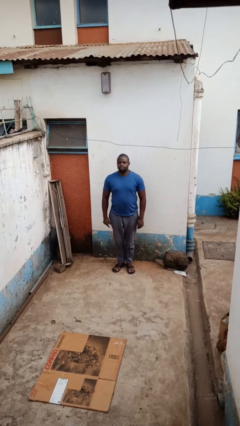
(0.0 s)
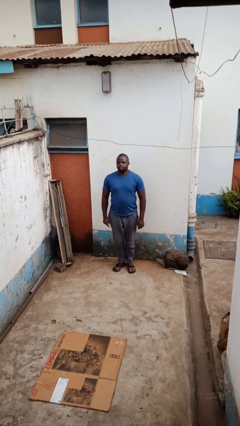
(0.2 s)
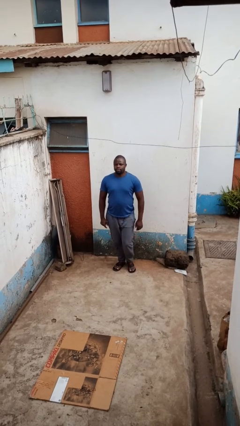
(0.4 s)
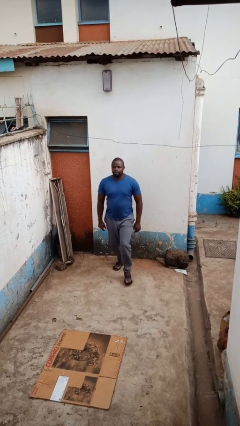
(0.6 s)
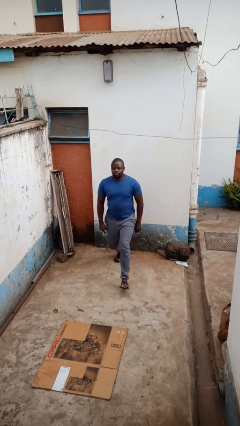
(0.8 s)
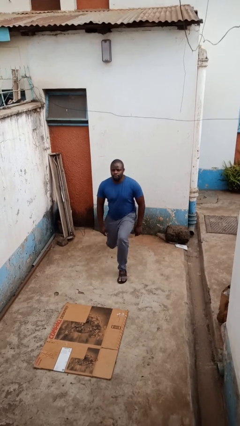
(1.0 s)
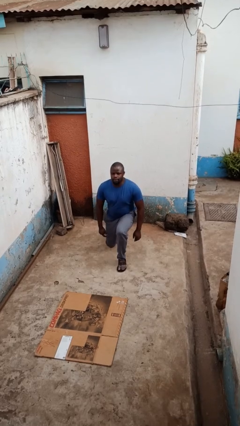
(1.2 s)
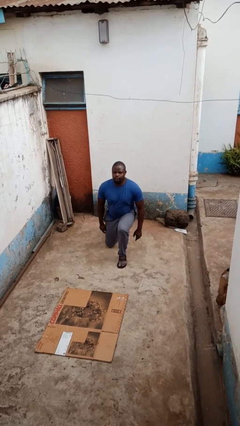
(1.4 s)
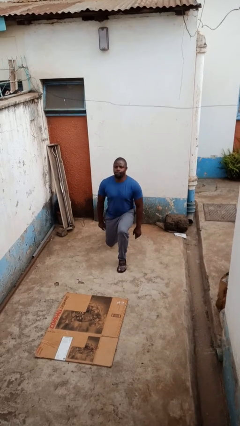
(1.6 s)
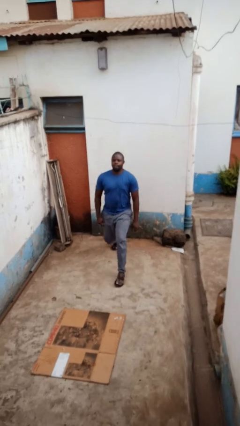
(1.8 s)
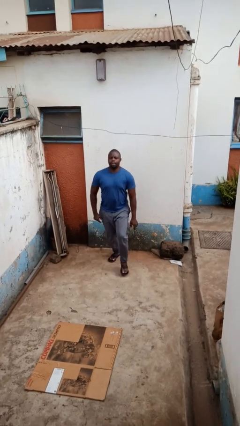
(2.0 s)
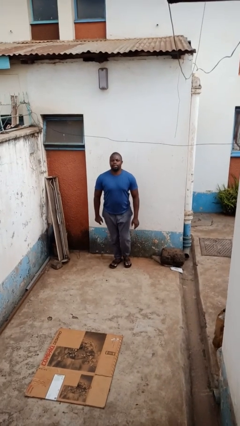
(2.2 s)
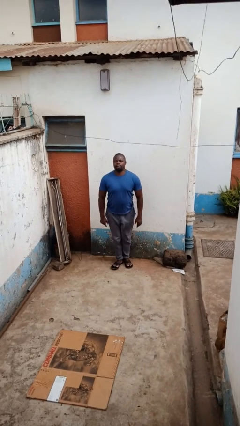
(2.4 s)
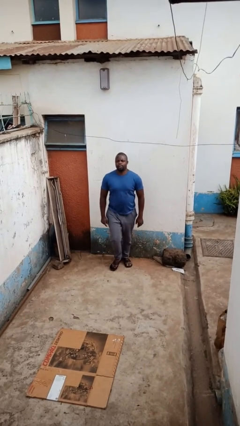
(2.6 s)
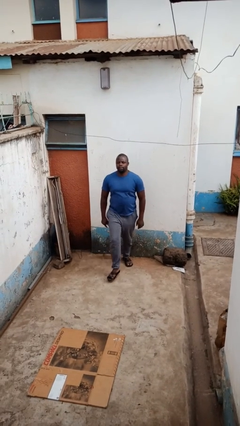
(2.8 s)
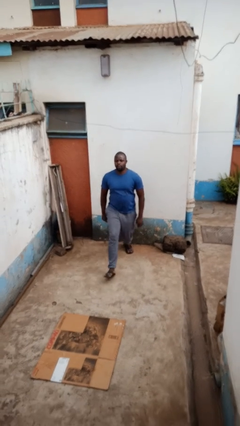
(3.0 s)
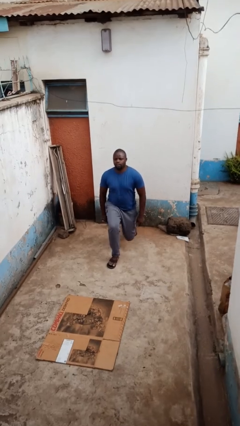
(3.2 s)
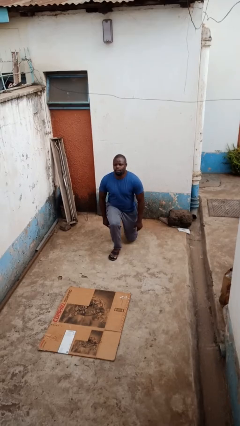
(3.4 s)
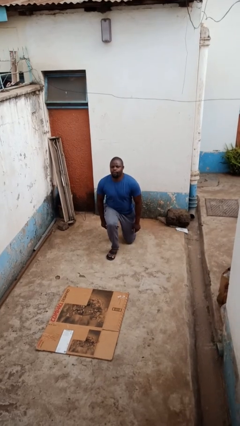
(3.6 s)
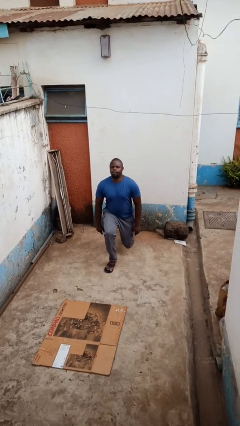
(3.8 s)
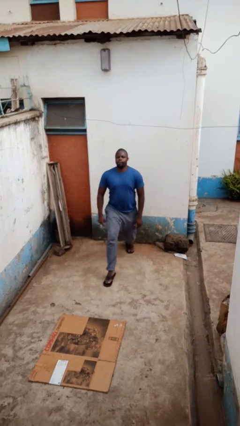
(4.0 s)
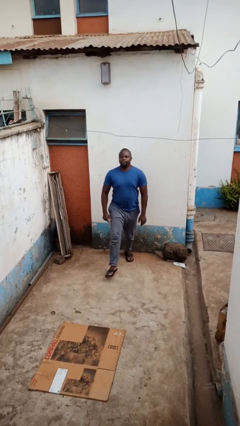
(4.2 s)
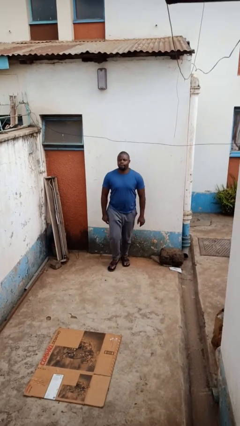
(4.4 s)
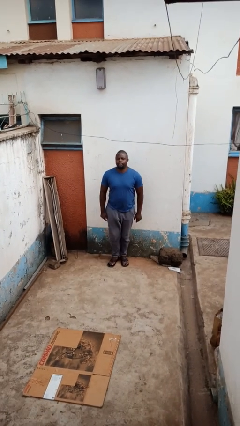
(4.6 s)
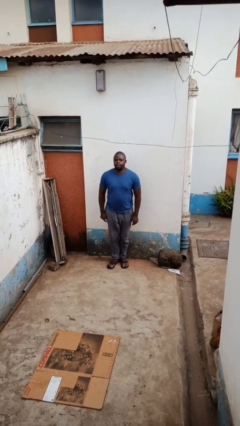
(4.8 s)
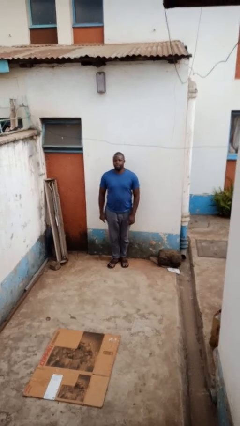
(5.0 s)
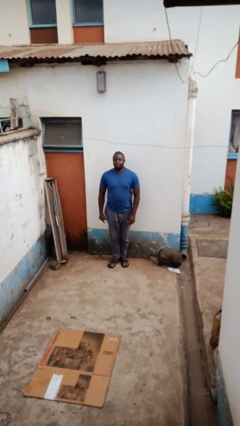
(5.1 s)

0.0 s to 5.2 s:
person exercises with lunges

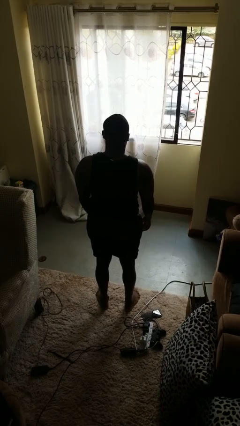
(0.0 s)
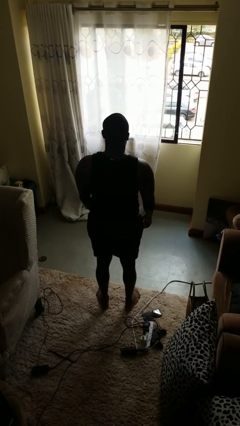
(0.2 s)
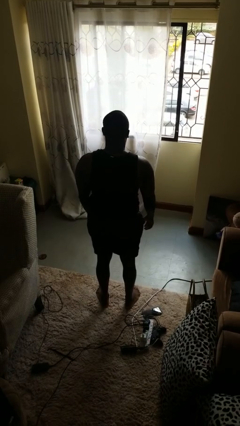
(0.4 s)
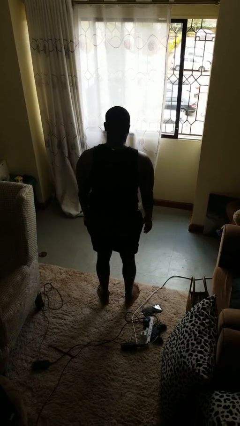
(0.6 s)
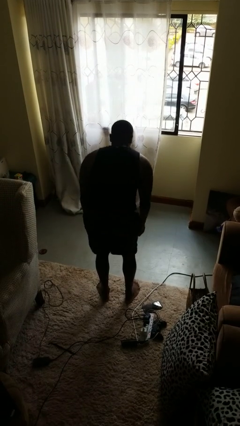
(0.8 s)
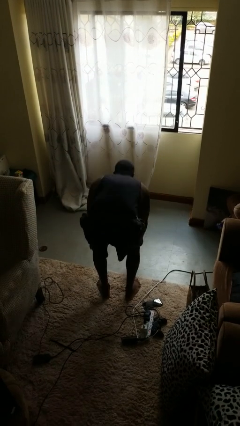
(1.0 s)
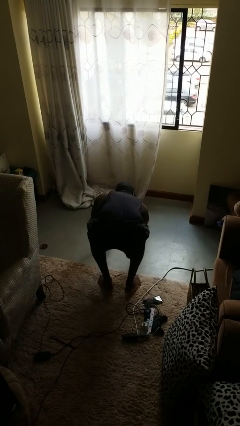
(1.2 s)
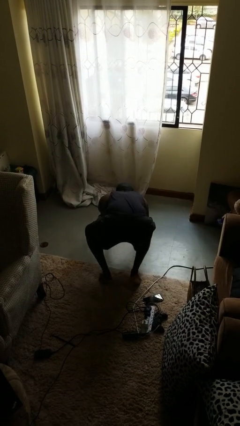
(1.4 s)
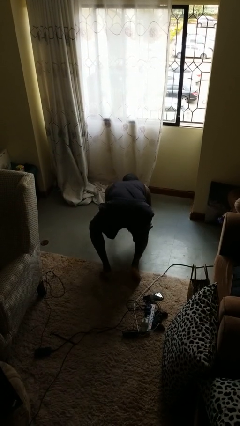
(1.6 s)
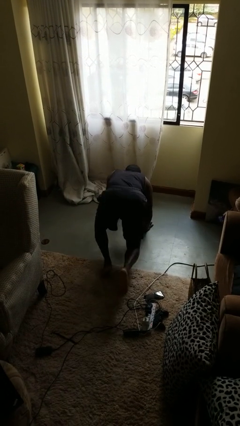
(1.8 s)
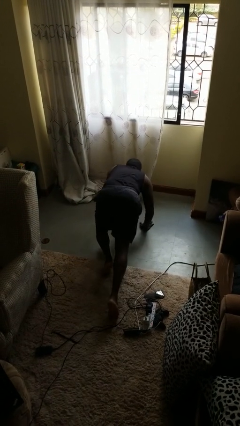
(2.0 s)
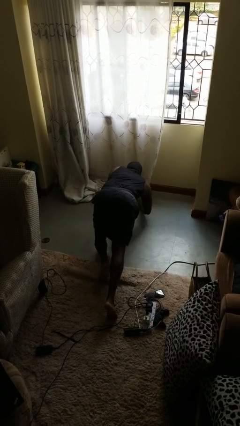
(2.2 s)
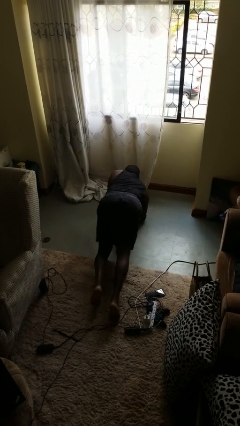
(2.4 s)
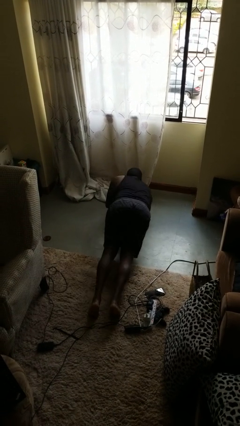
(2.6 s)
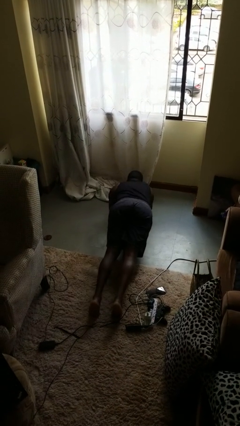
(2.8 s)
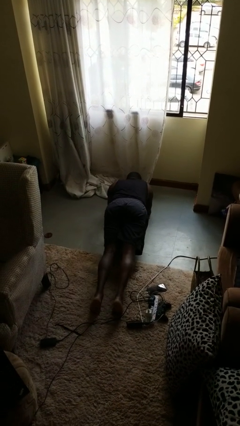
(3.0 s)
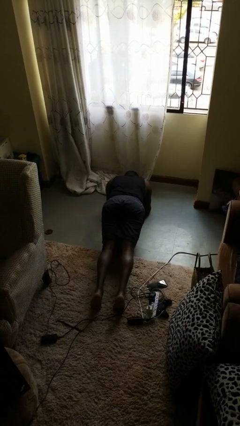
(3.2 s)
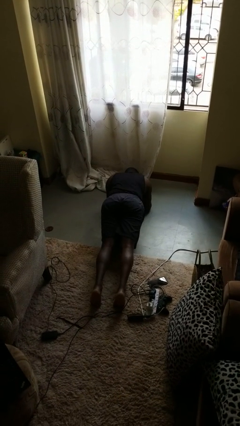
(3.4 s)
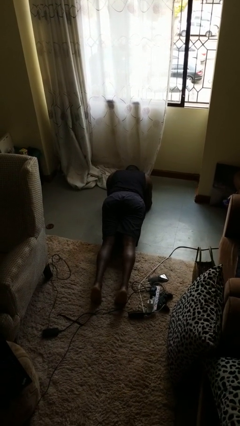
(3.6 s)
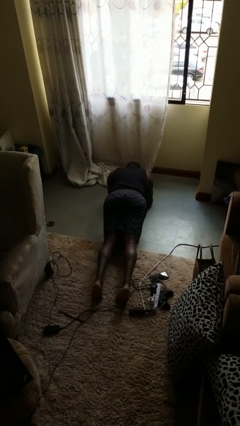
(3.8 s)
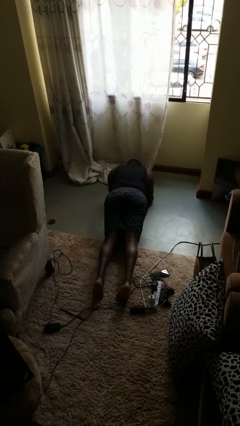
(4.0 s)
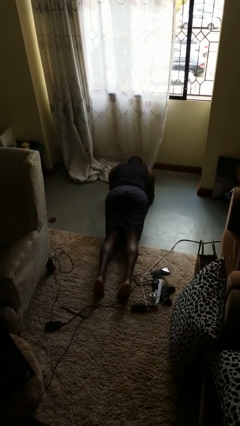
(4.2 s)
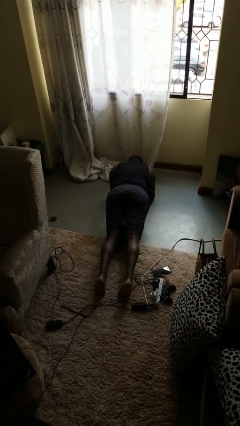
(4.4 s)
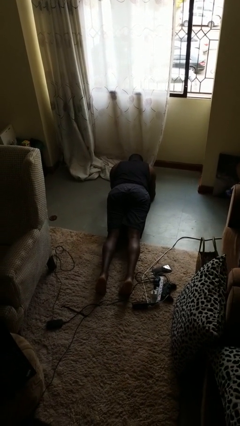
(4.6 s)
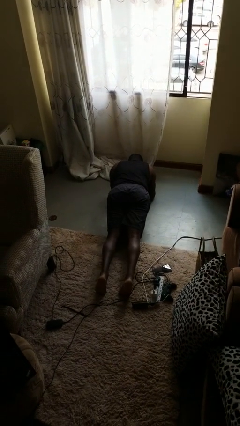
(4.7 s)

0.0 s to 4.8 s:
person exercises with plank

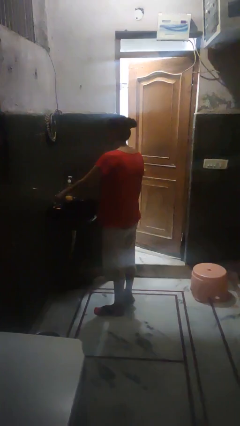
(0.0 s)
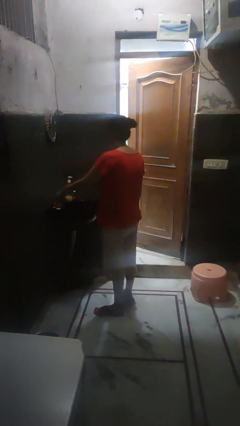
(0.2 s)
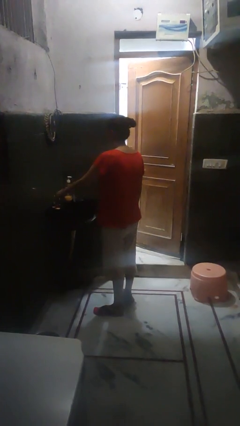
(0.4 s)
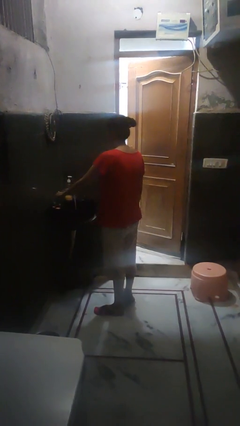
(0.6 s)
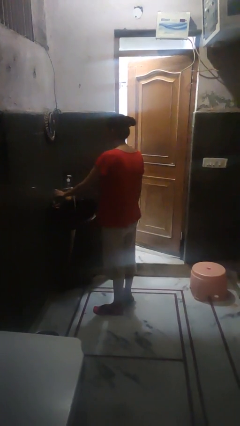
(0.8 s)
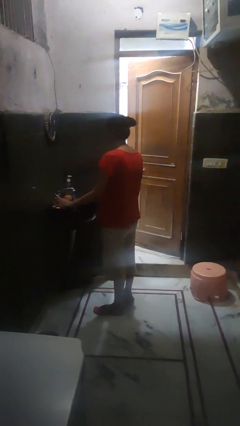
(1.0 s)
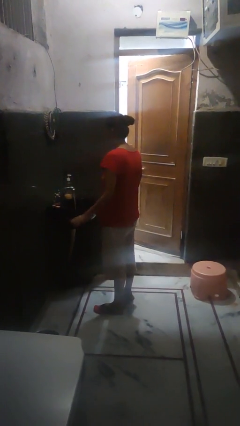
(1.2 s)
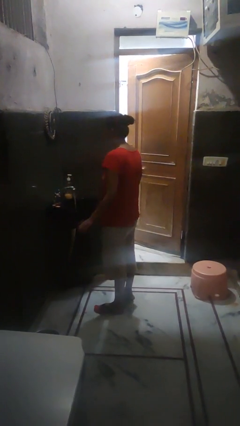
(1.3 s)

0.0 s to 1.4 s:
person turns on faucet

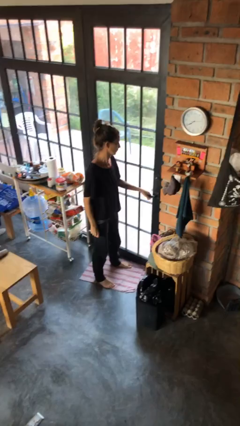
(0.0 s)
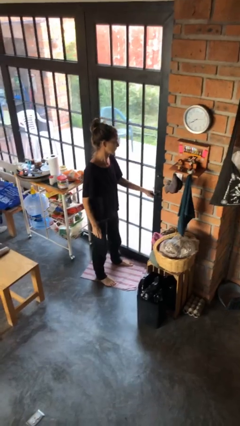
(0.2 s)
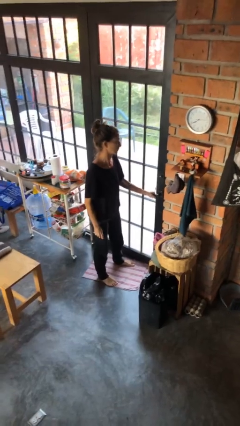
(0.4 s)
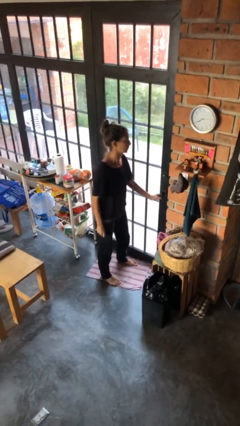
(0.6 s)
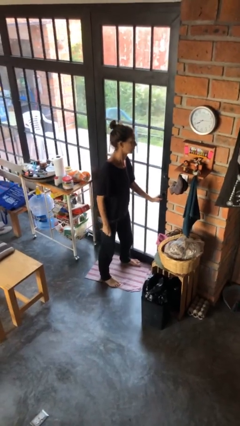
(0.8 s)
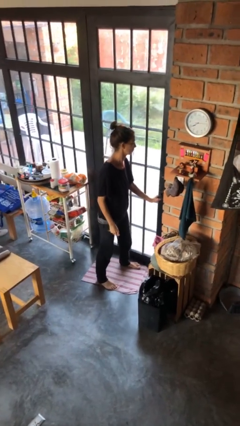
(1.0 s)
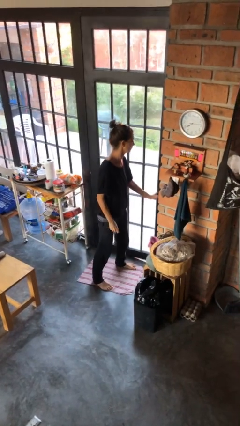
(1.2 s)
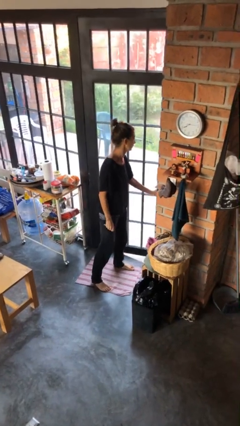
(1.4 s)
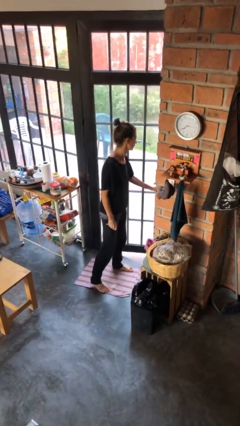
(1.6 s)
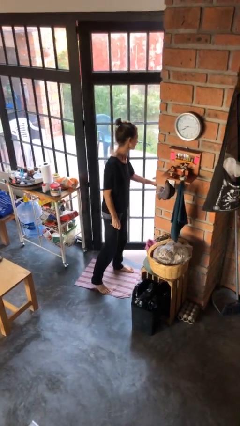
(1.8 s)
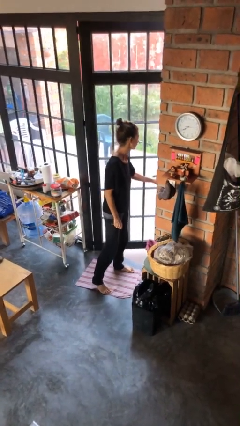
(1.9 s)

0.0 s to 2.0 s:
person opens facility door

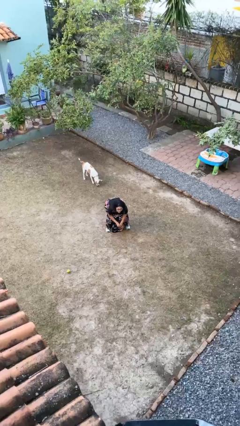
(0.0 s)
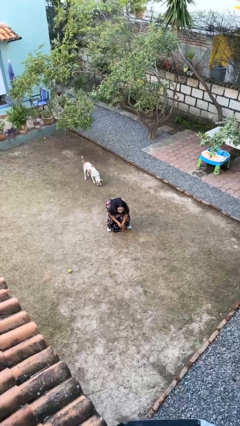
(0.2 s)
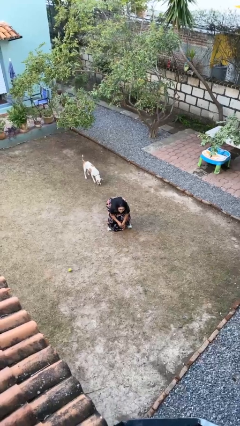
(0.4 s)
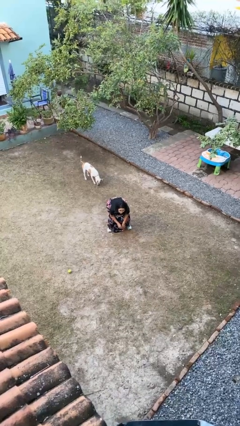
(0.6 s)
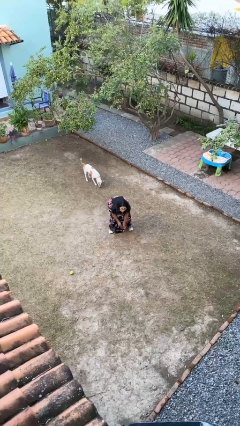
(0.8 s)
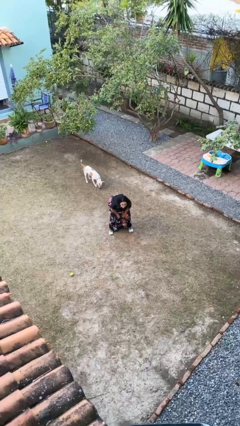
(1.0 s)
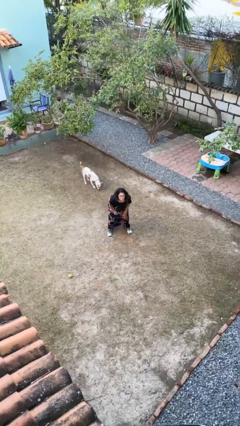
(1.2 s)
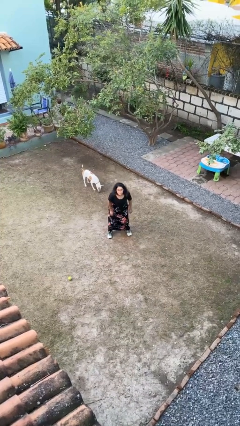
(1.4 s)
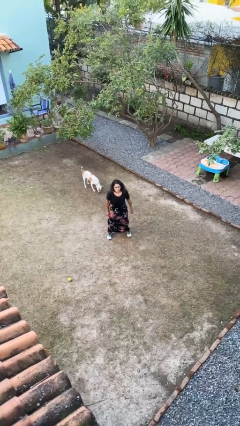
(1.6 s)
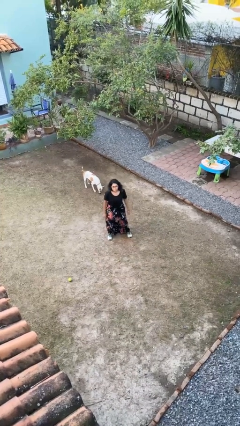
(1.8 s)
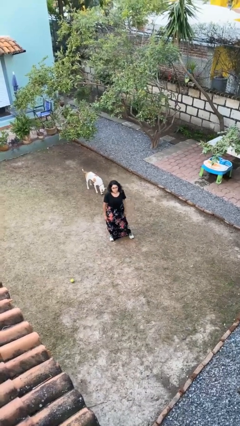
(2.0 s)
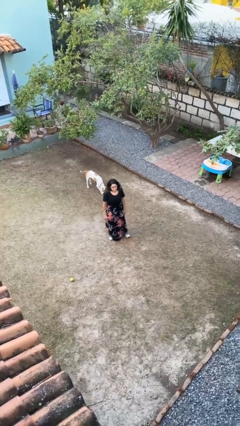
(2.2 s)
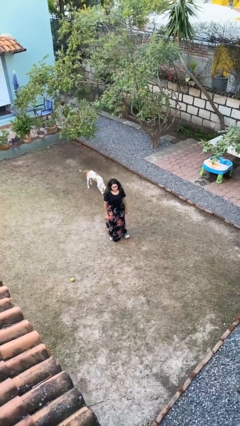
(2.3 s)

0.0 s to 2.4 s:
person stands up

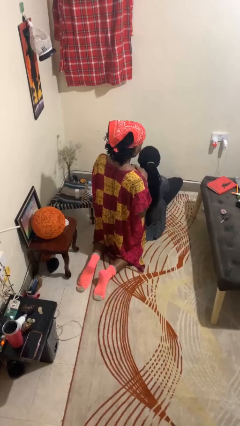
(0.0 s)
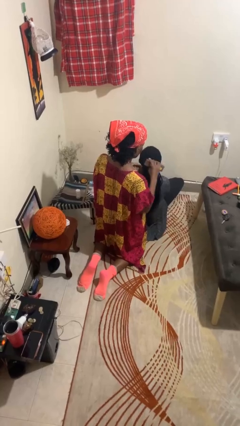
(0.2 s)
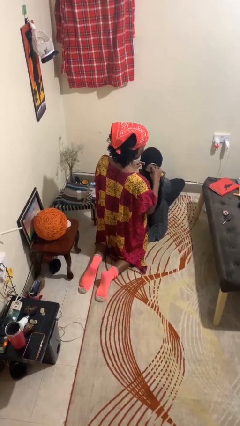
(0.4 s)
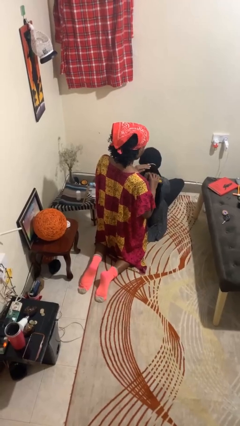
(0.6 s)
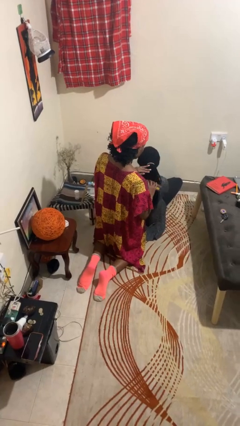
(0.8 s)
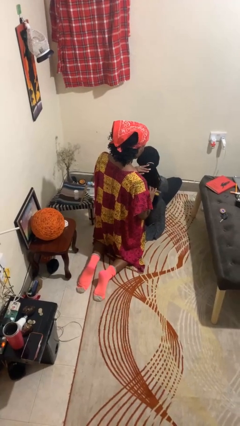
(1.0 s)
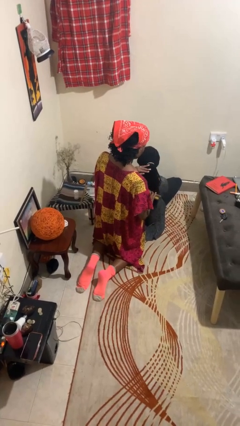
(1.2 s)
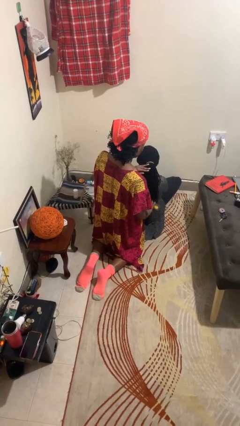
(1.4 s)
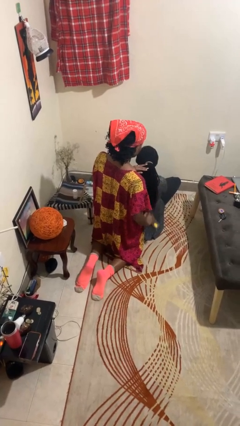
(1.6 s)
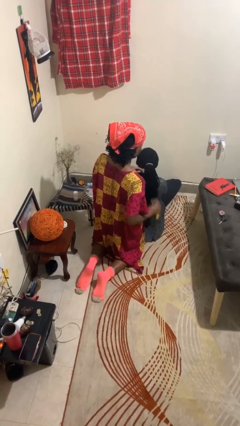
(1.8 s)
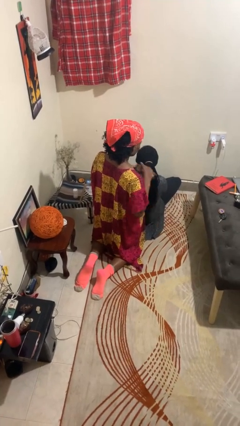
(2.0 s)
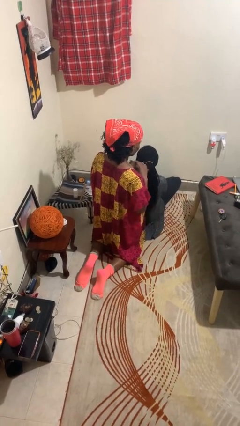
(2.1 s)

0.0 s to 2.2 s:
person brushes hair of person
